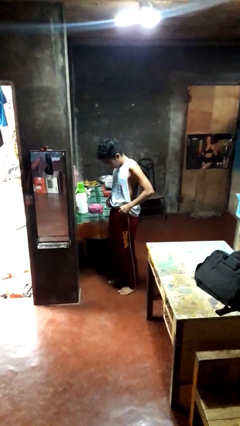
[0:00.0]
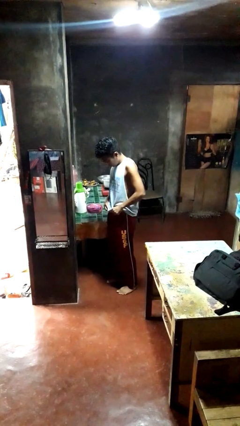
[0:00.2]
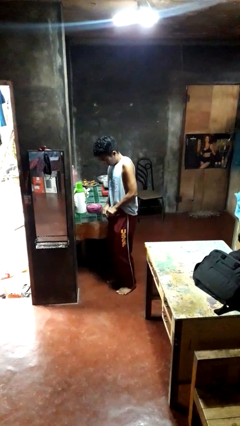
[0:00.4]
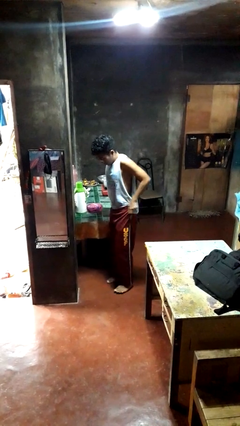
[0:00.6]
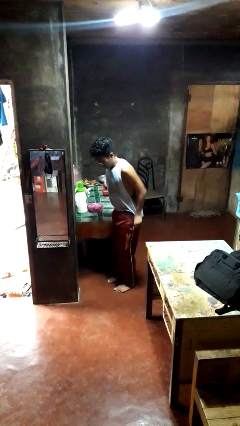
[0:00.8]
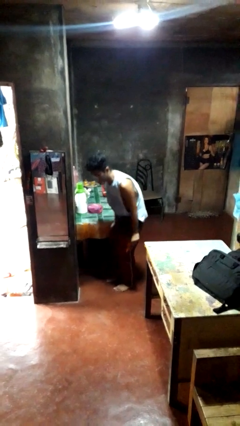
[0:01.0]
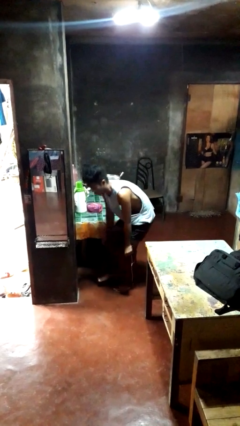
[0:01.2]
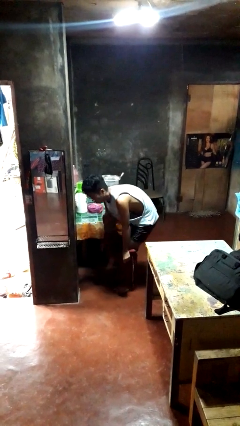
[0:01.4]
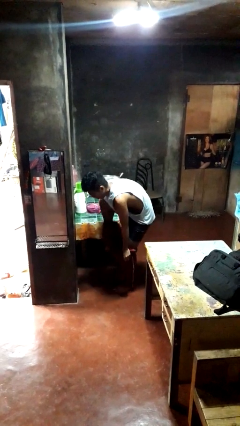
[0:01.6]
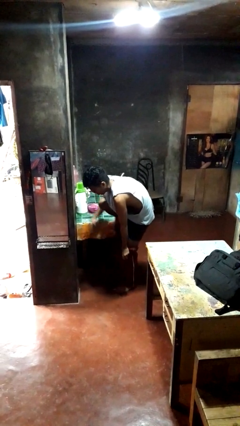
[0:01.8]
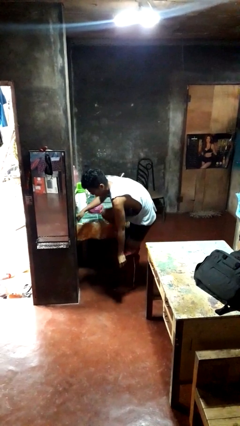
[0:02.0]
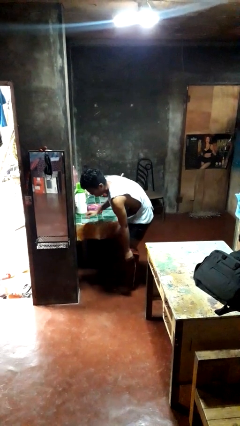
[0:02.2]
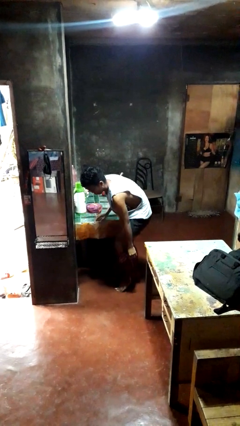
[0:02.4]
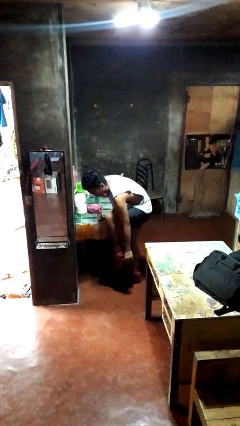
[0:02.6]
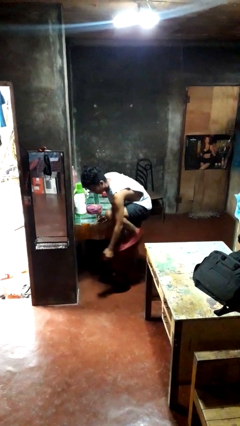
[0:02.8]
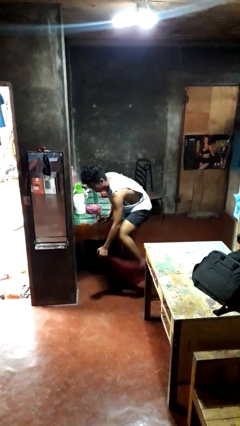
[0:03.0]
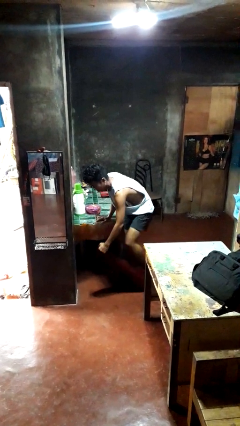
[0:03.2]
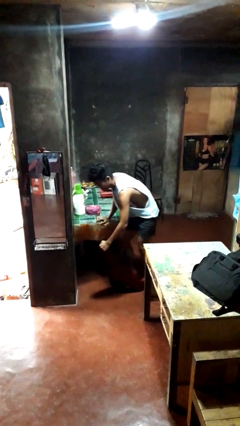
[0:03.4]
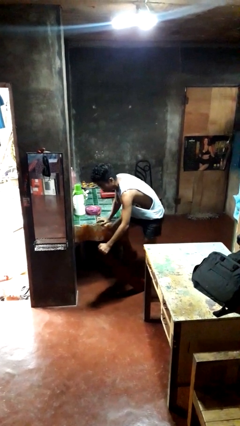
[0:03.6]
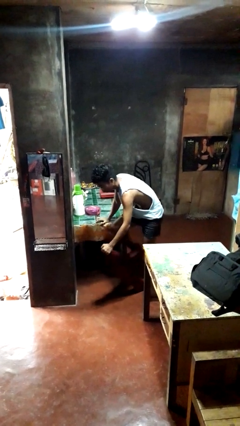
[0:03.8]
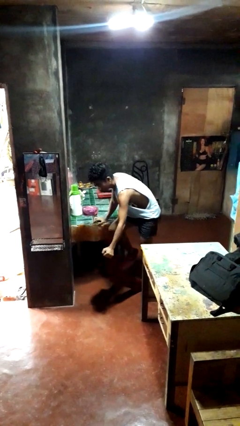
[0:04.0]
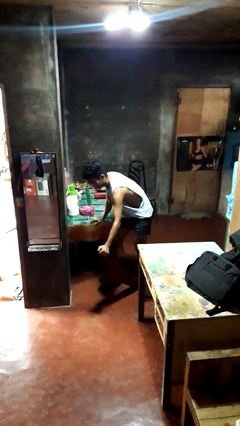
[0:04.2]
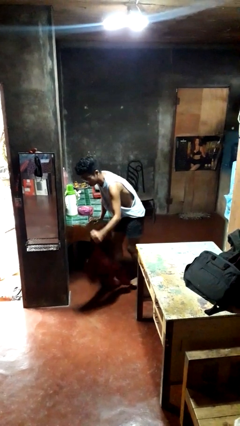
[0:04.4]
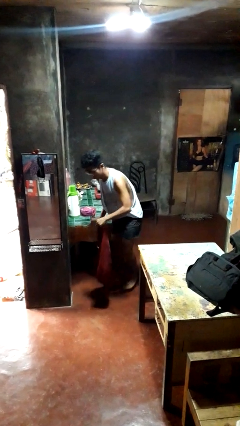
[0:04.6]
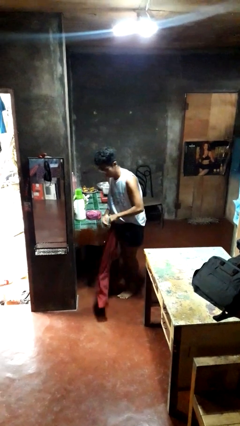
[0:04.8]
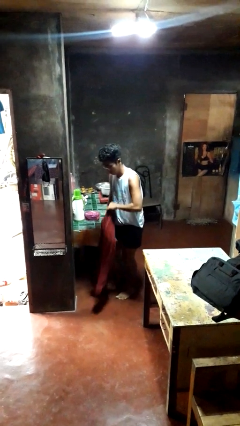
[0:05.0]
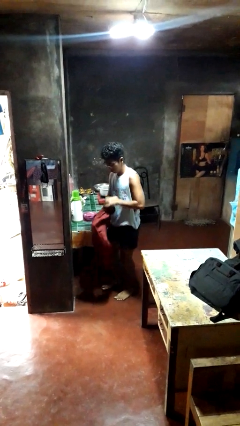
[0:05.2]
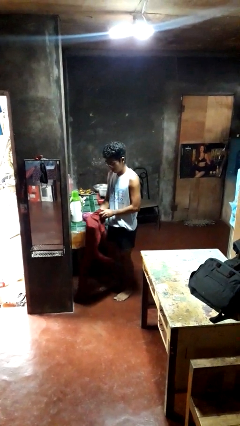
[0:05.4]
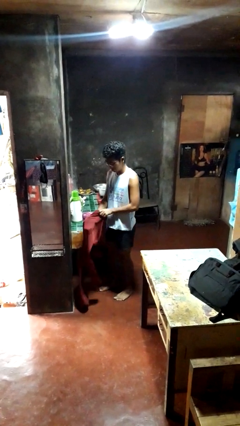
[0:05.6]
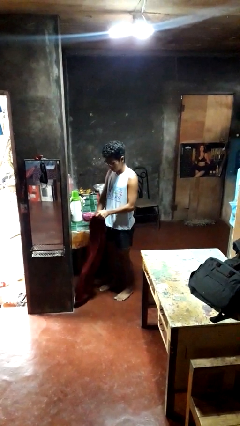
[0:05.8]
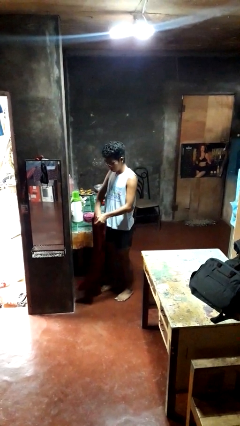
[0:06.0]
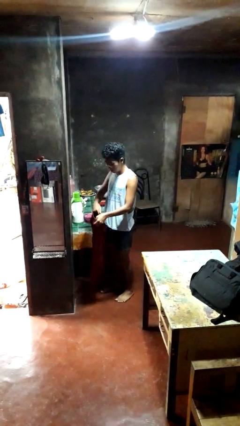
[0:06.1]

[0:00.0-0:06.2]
person takes off pants

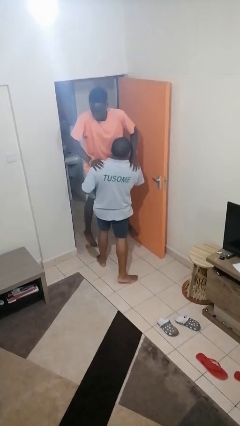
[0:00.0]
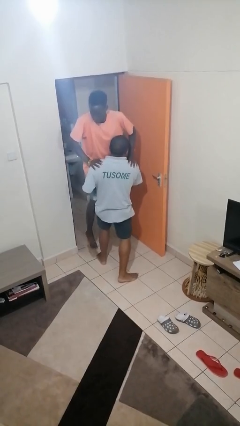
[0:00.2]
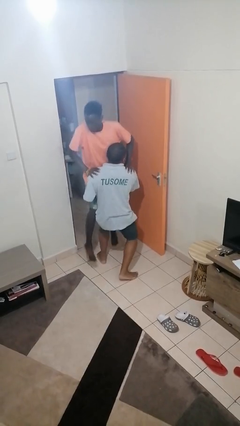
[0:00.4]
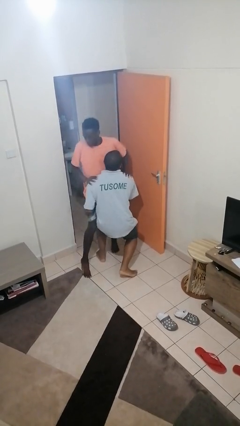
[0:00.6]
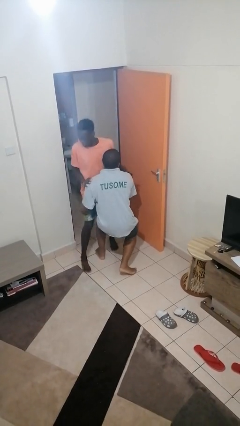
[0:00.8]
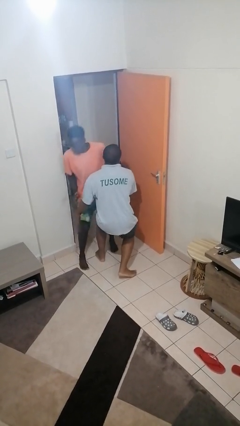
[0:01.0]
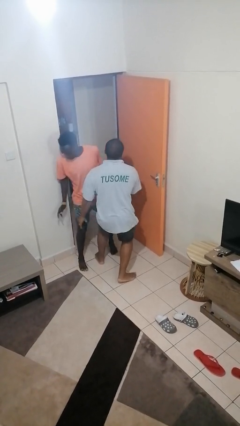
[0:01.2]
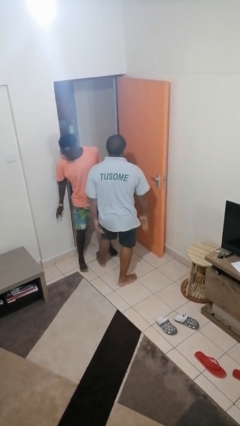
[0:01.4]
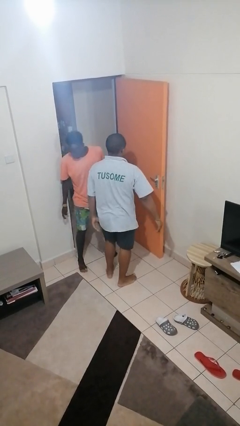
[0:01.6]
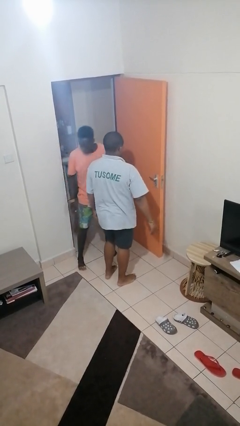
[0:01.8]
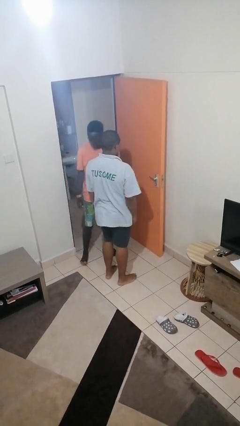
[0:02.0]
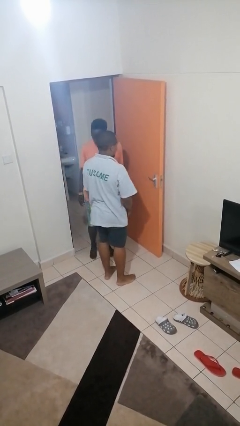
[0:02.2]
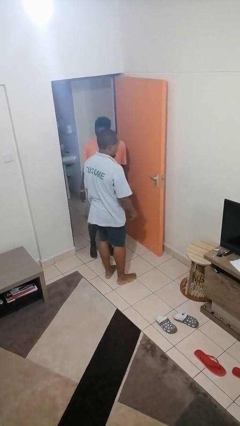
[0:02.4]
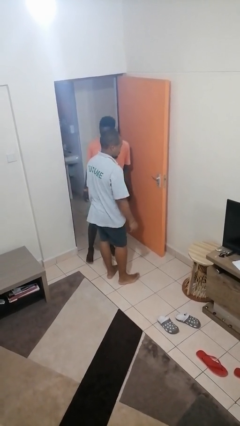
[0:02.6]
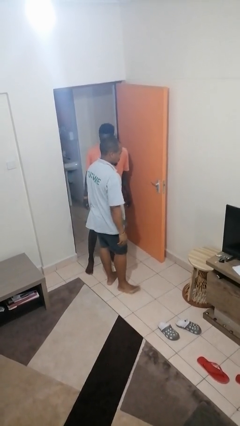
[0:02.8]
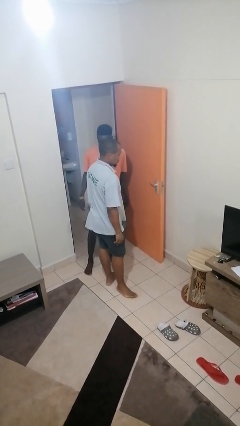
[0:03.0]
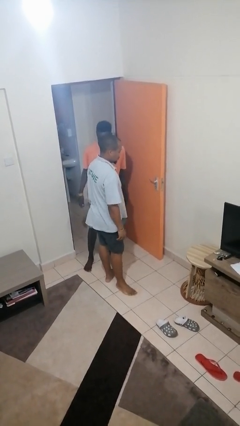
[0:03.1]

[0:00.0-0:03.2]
person puts down person

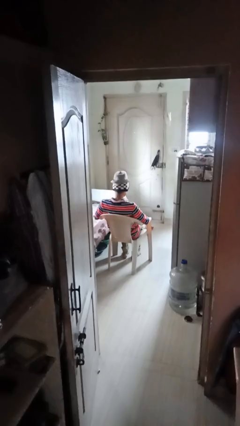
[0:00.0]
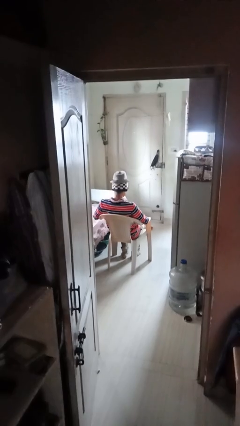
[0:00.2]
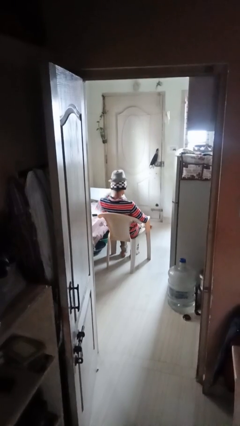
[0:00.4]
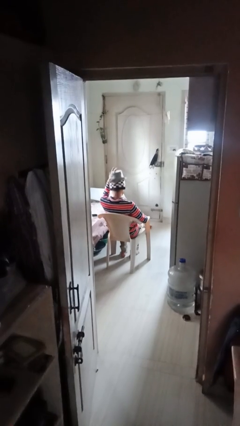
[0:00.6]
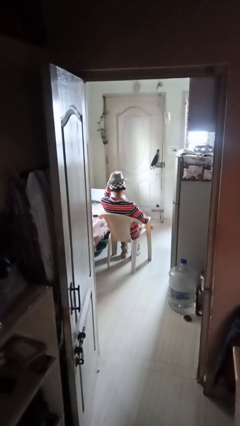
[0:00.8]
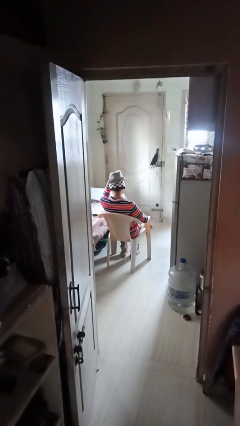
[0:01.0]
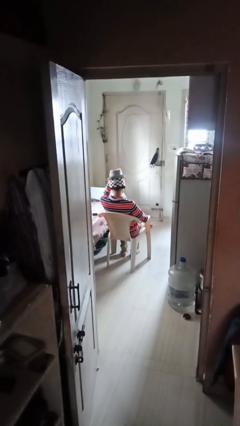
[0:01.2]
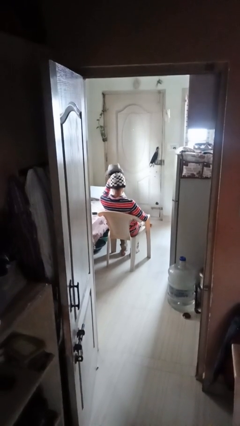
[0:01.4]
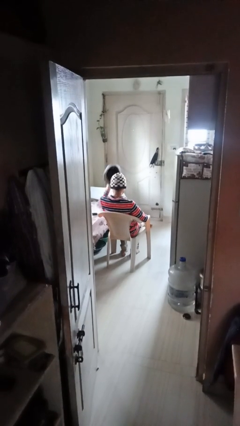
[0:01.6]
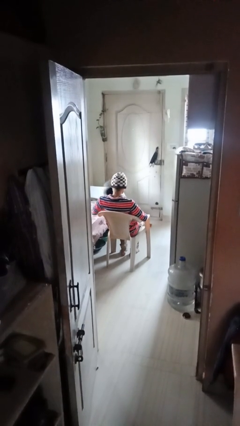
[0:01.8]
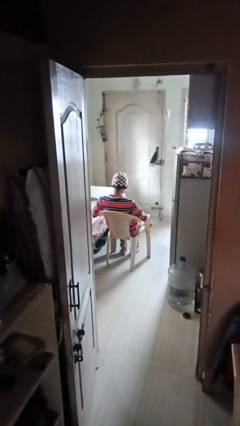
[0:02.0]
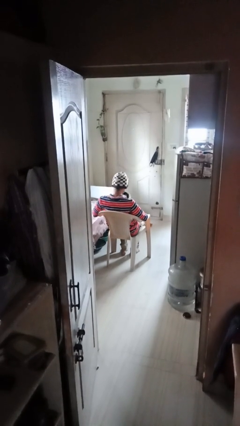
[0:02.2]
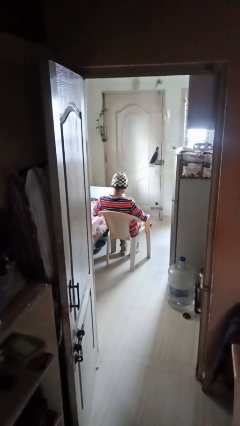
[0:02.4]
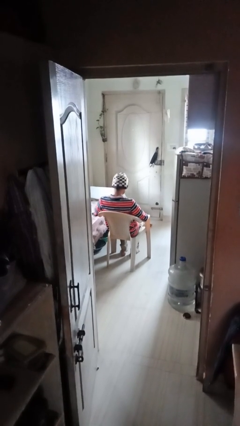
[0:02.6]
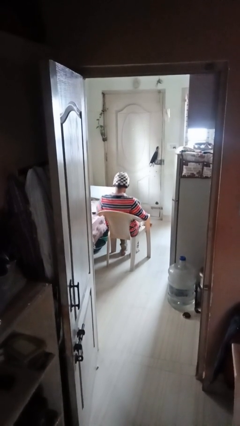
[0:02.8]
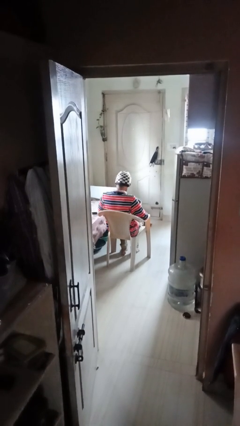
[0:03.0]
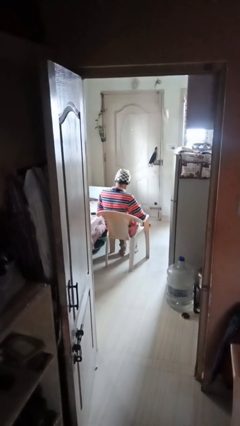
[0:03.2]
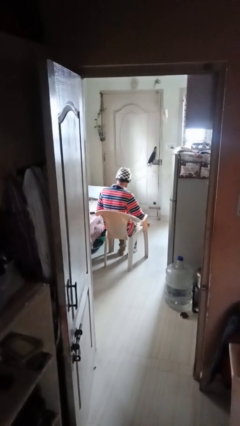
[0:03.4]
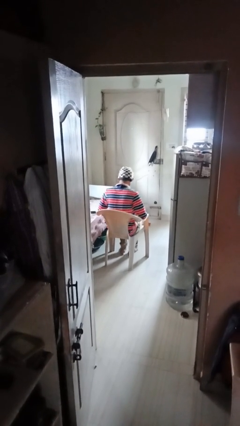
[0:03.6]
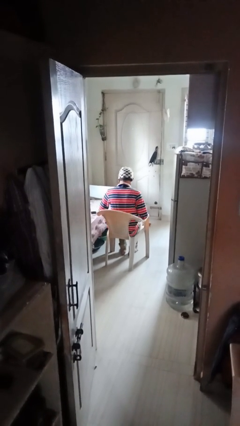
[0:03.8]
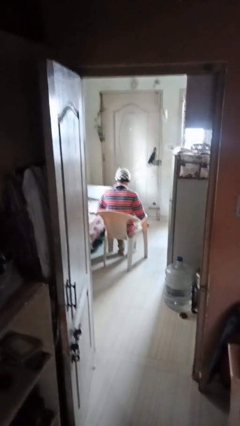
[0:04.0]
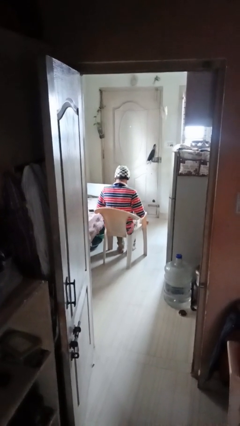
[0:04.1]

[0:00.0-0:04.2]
person takes off hat

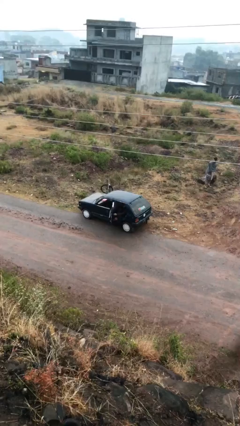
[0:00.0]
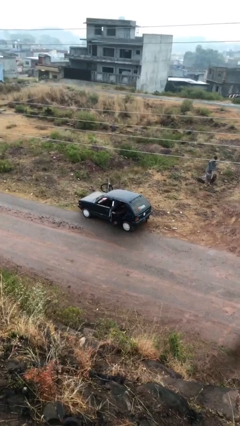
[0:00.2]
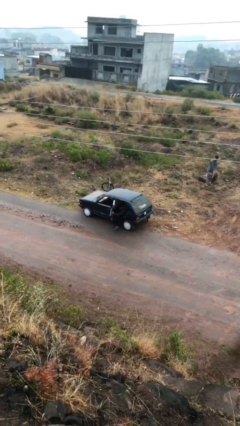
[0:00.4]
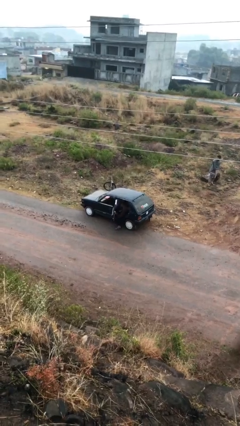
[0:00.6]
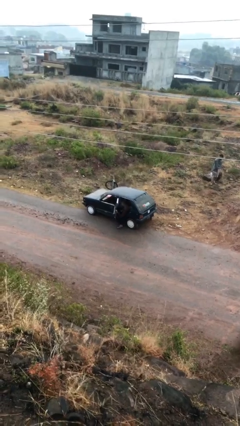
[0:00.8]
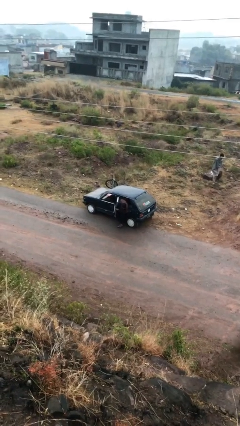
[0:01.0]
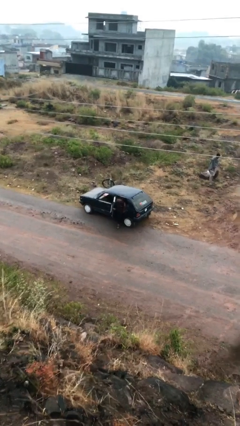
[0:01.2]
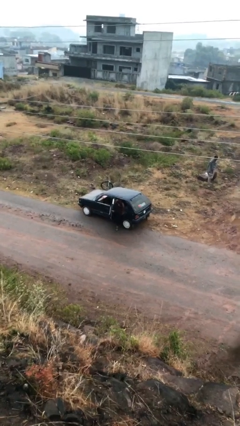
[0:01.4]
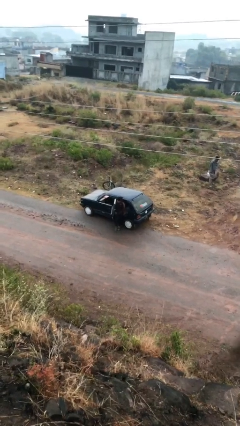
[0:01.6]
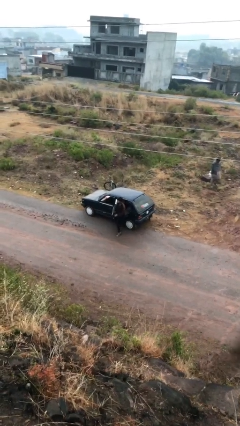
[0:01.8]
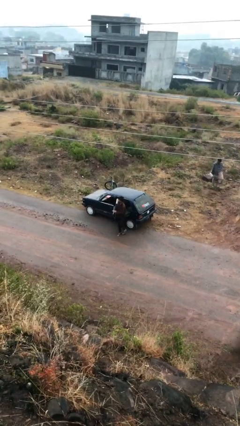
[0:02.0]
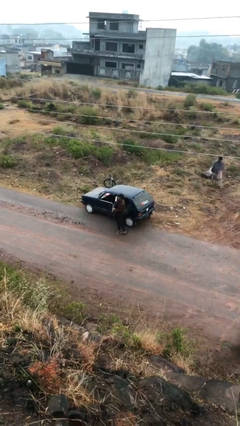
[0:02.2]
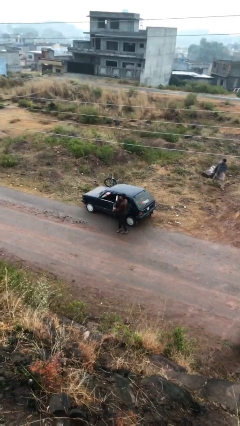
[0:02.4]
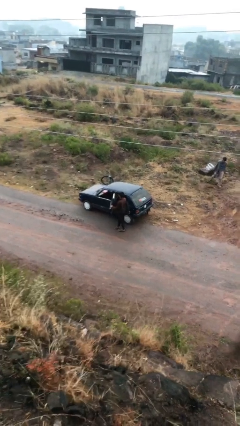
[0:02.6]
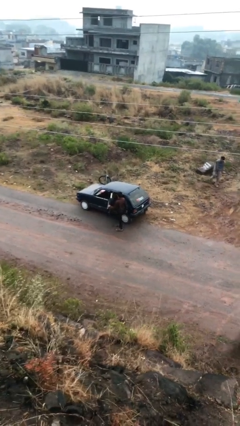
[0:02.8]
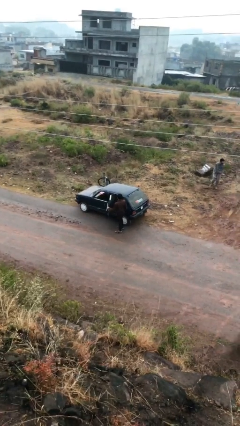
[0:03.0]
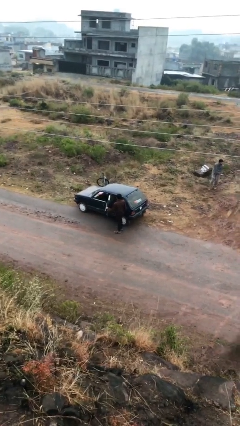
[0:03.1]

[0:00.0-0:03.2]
person exits car

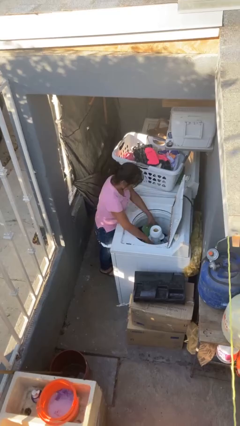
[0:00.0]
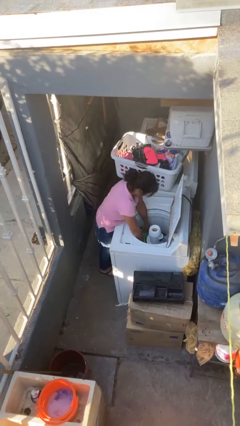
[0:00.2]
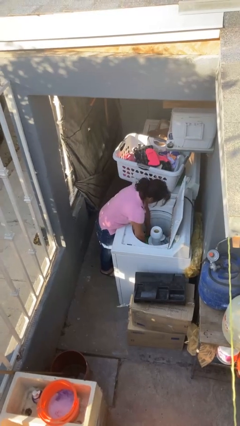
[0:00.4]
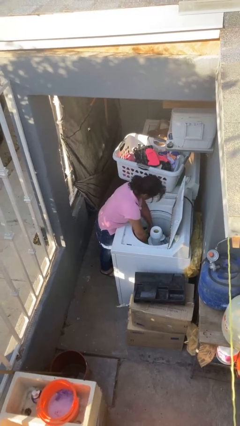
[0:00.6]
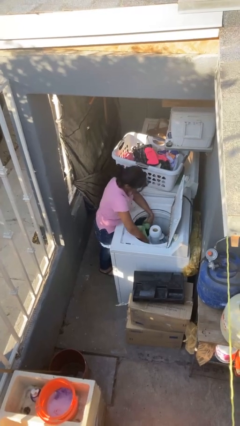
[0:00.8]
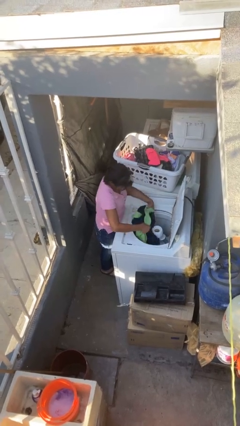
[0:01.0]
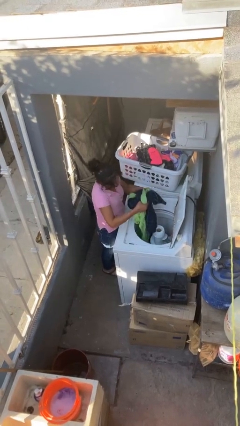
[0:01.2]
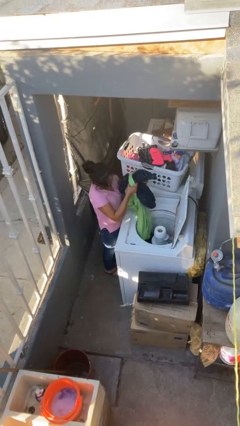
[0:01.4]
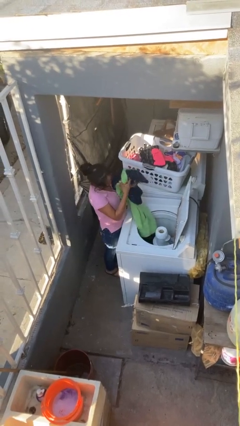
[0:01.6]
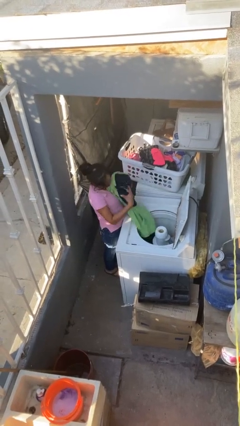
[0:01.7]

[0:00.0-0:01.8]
person loads clotheswasher
